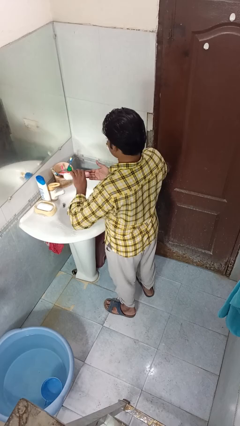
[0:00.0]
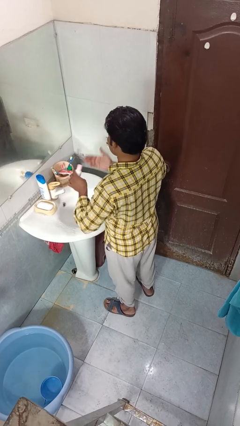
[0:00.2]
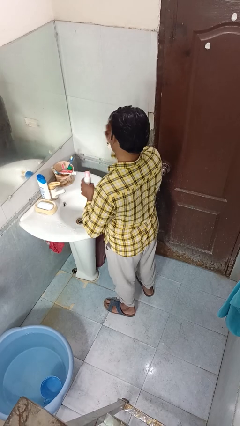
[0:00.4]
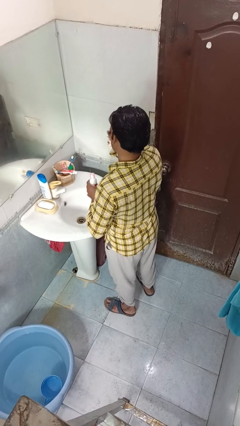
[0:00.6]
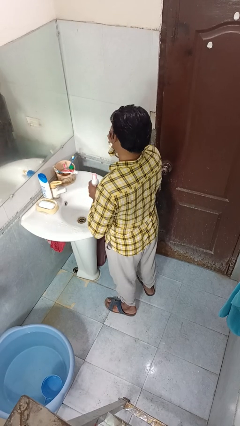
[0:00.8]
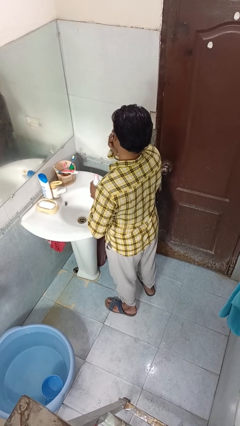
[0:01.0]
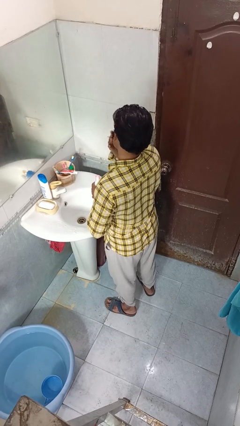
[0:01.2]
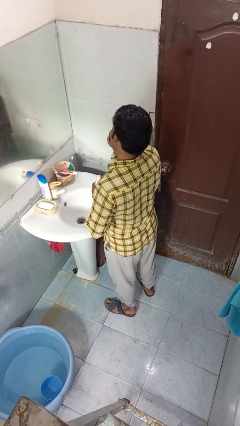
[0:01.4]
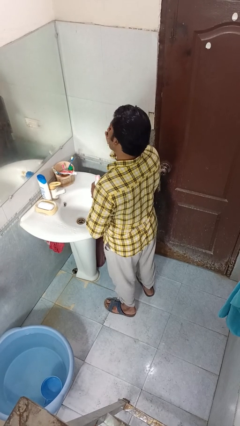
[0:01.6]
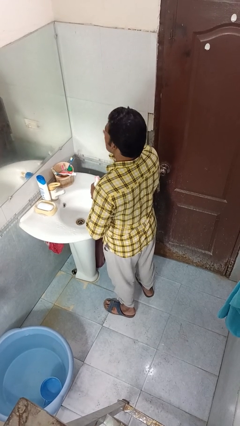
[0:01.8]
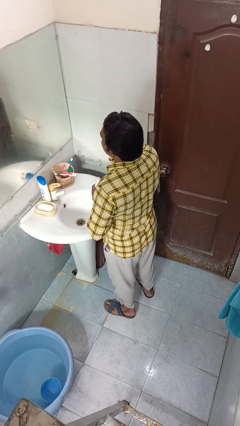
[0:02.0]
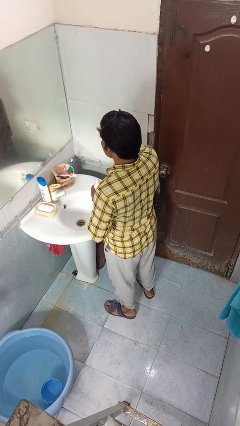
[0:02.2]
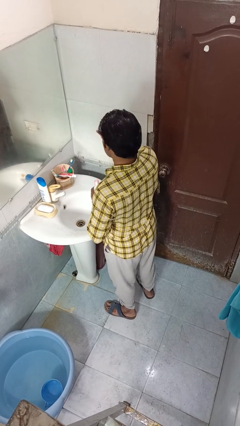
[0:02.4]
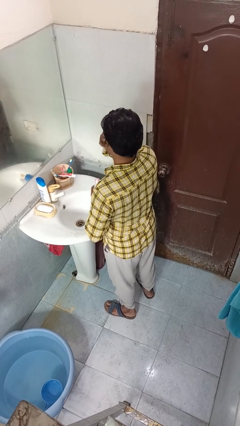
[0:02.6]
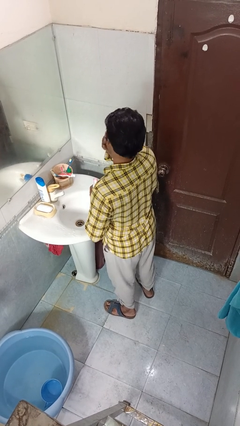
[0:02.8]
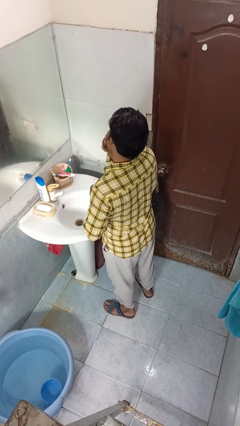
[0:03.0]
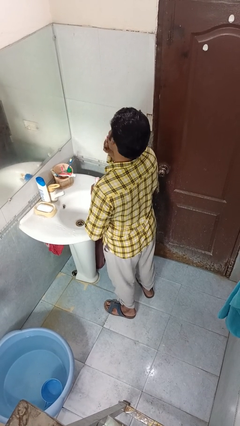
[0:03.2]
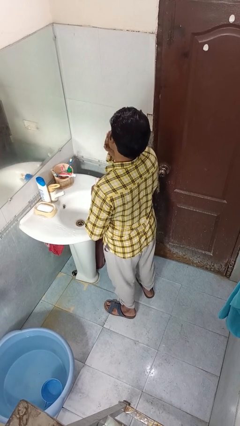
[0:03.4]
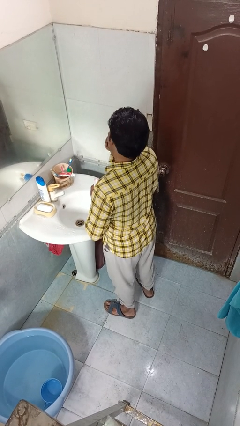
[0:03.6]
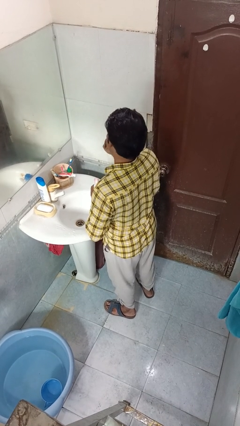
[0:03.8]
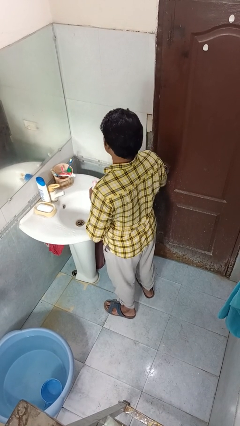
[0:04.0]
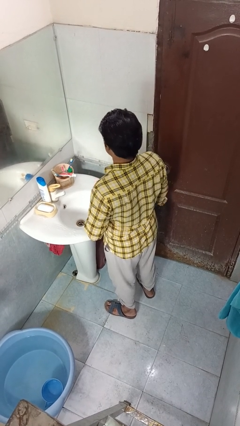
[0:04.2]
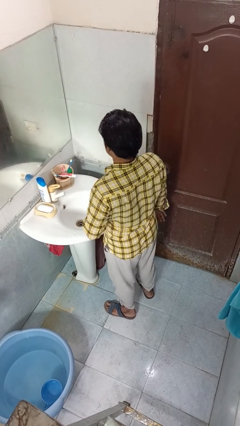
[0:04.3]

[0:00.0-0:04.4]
person applies facial moisturizer

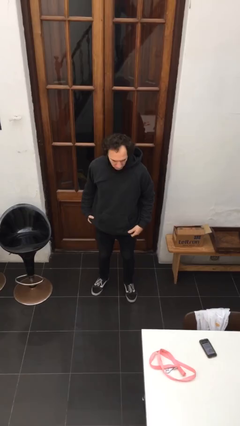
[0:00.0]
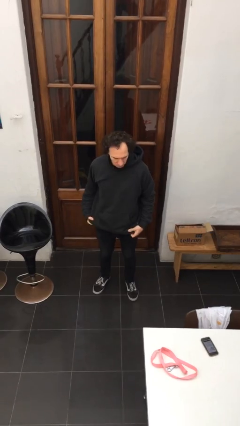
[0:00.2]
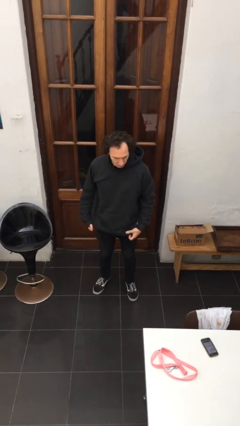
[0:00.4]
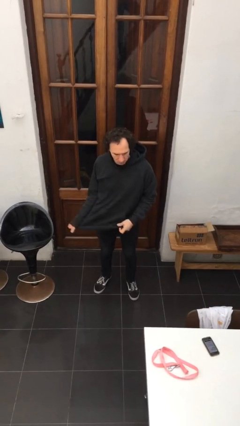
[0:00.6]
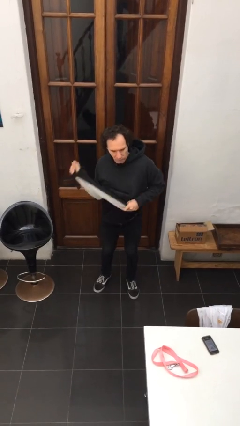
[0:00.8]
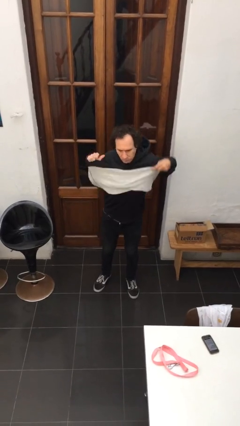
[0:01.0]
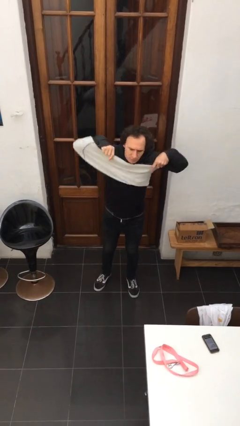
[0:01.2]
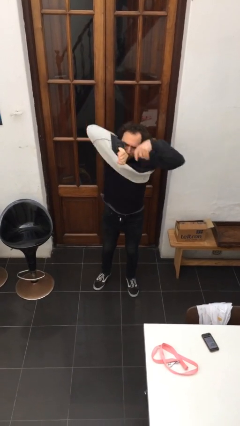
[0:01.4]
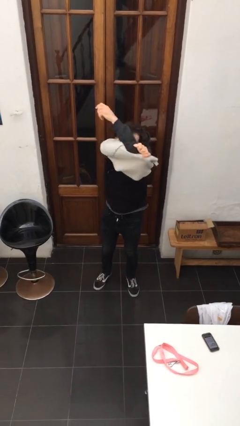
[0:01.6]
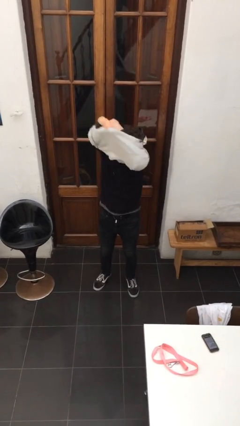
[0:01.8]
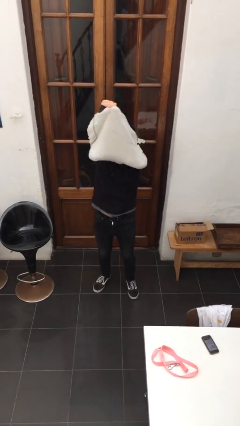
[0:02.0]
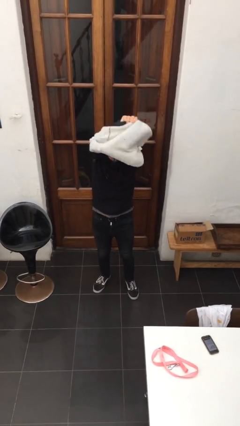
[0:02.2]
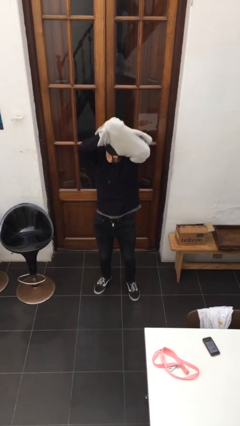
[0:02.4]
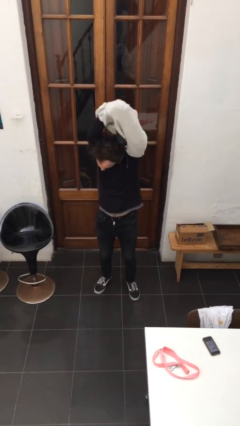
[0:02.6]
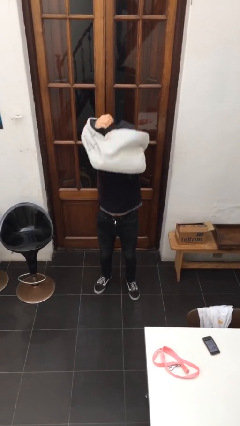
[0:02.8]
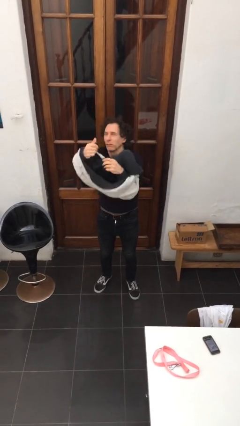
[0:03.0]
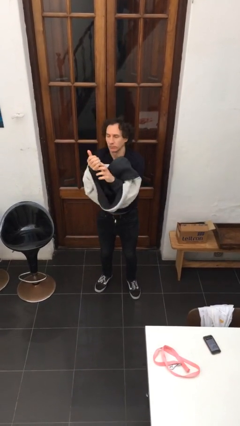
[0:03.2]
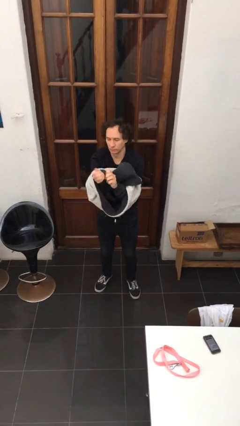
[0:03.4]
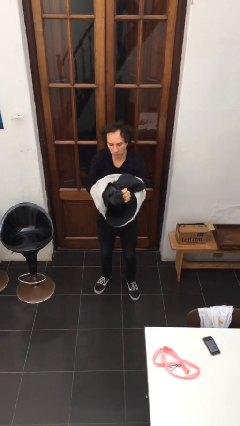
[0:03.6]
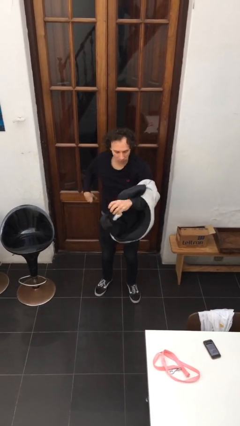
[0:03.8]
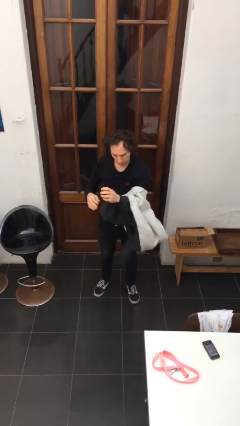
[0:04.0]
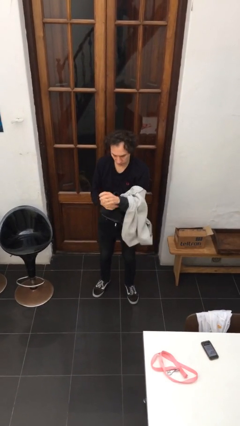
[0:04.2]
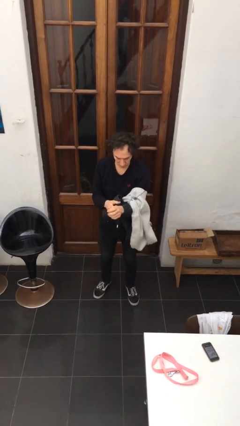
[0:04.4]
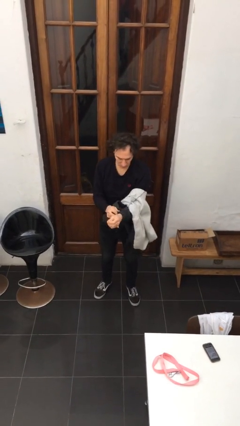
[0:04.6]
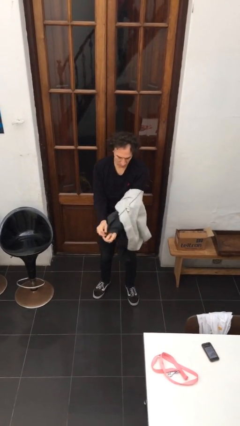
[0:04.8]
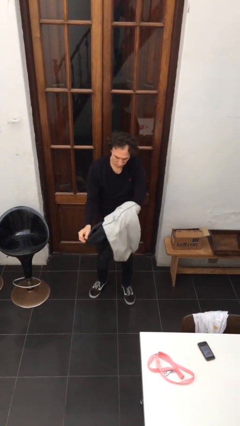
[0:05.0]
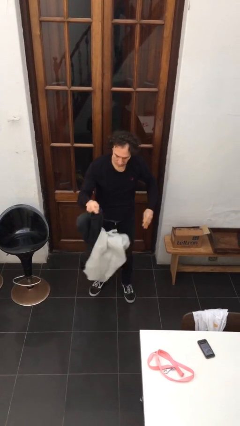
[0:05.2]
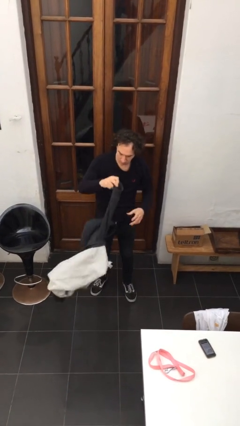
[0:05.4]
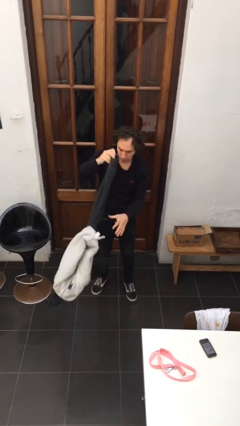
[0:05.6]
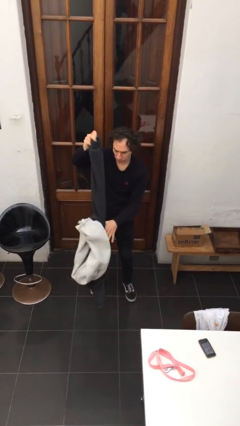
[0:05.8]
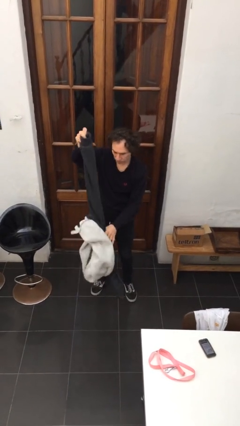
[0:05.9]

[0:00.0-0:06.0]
person takes off hoodie

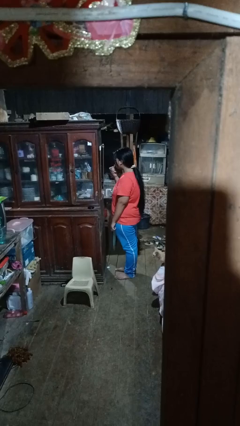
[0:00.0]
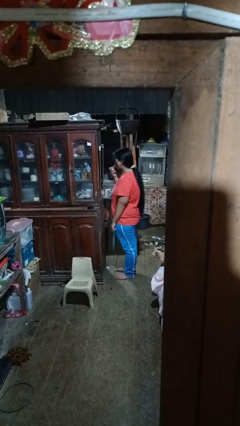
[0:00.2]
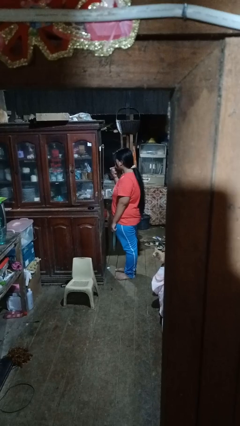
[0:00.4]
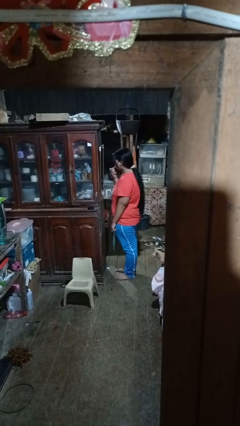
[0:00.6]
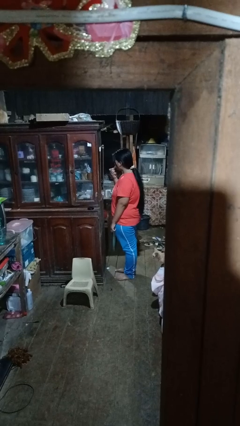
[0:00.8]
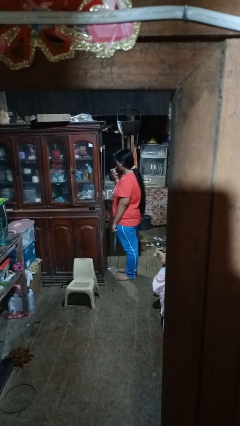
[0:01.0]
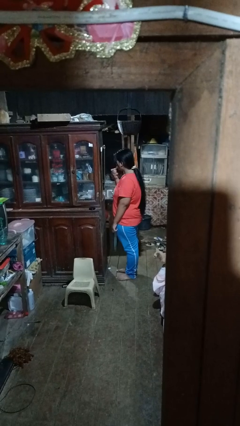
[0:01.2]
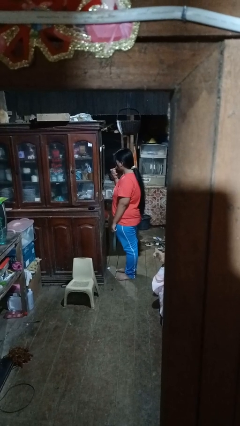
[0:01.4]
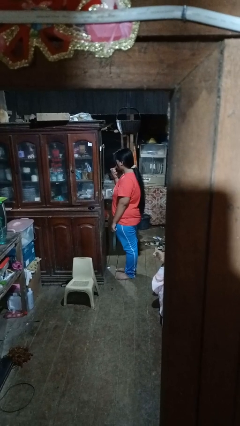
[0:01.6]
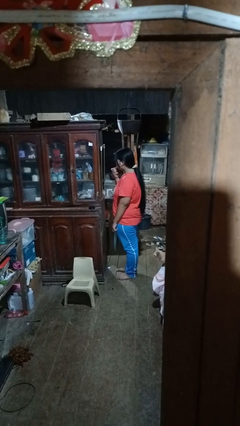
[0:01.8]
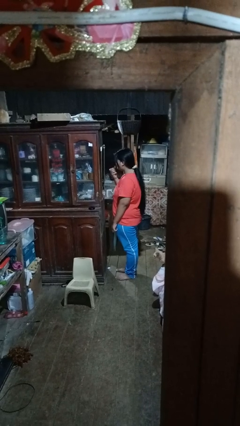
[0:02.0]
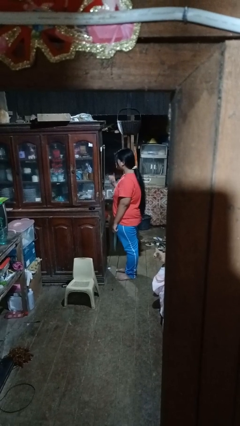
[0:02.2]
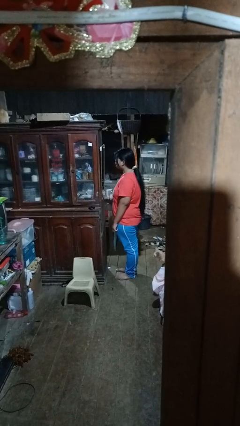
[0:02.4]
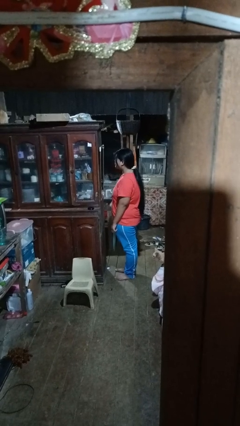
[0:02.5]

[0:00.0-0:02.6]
person applies lip makeup

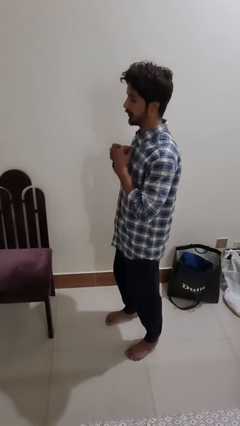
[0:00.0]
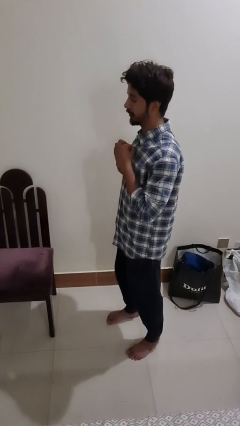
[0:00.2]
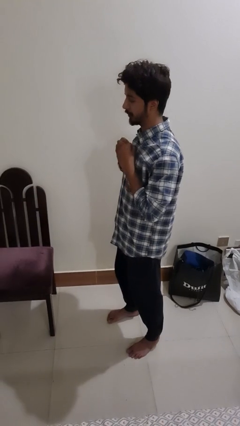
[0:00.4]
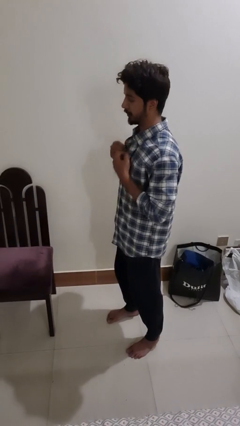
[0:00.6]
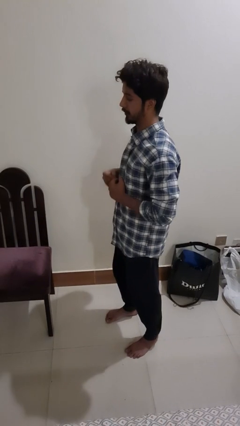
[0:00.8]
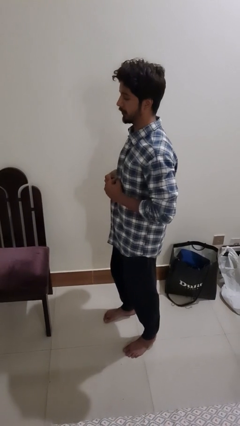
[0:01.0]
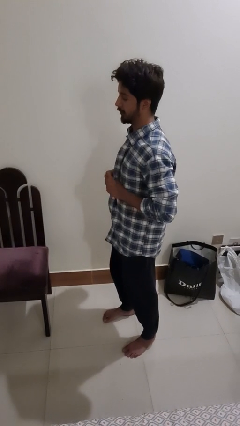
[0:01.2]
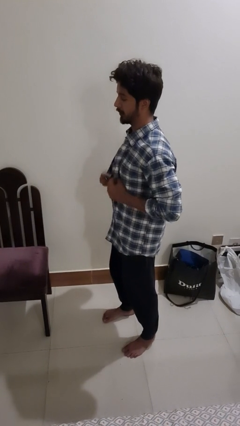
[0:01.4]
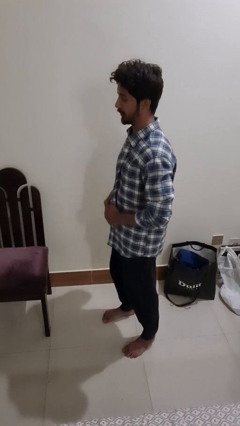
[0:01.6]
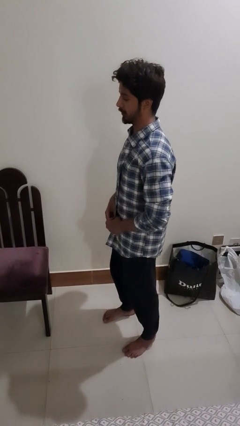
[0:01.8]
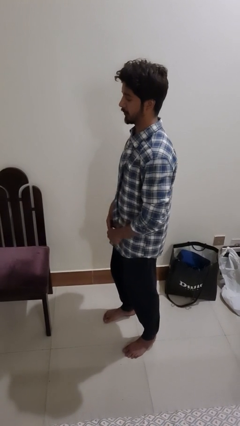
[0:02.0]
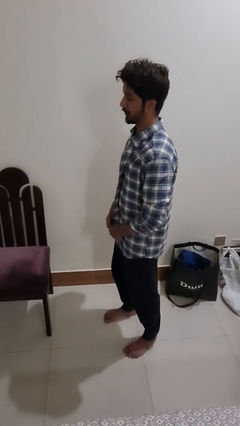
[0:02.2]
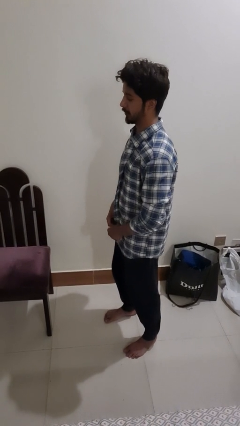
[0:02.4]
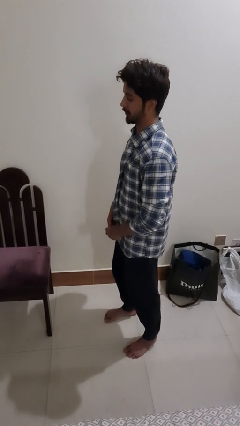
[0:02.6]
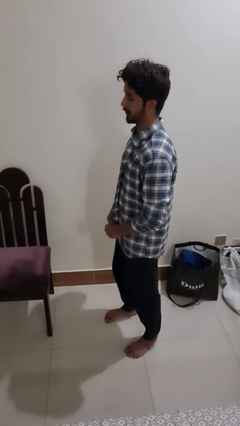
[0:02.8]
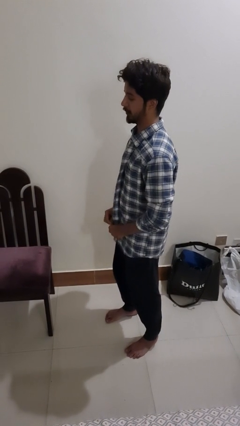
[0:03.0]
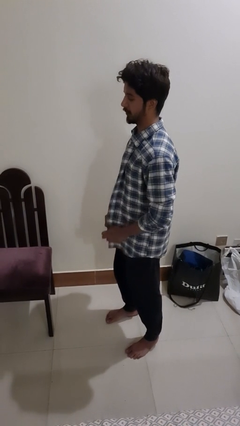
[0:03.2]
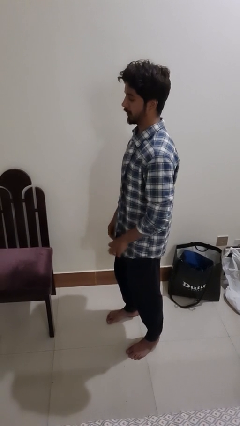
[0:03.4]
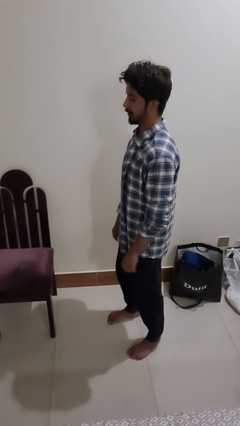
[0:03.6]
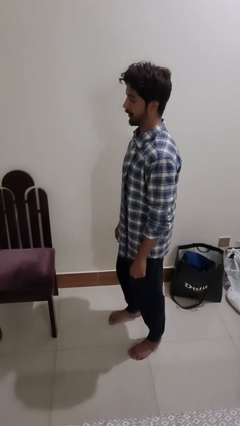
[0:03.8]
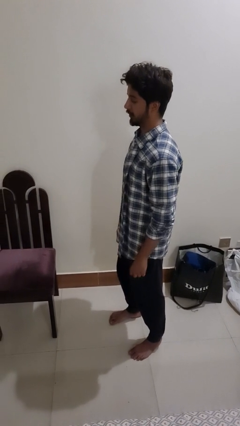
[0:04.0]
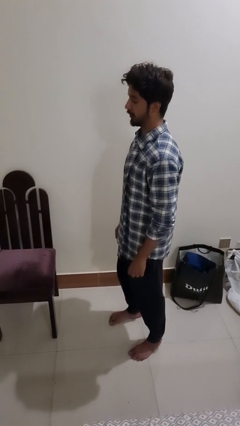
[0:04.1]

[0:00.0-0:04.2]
person unbuttons shirt

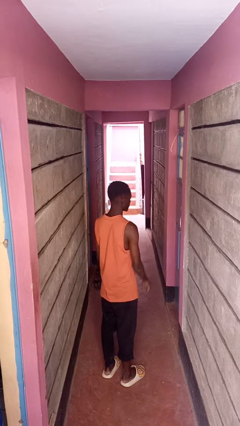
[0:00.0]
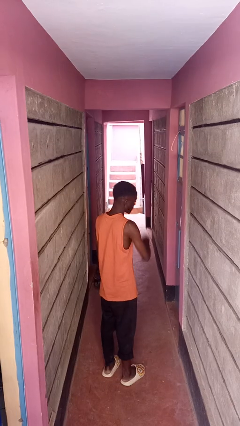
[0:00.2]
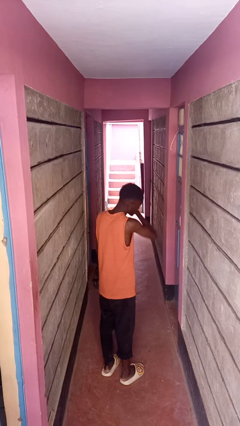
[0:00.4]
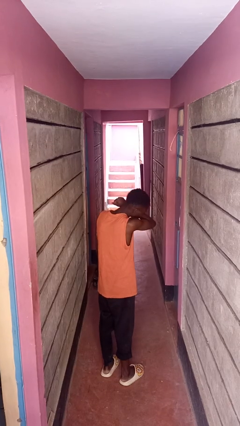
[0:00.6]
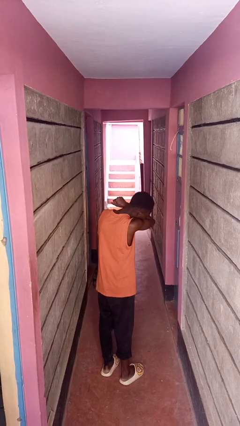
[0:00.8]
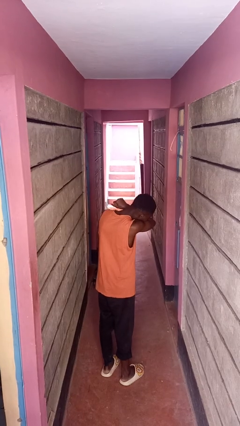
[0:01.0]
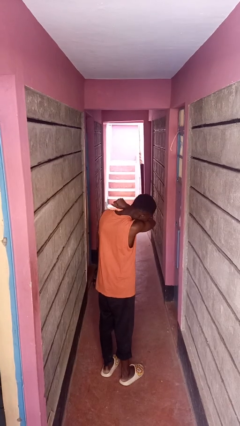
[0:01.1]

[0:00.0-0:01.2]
person sneezes into arm
